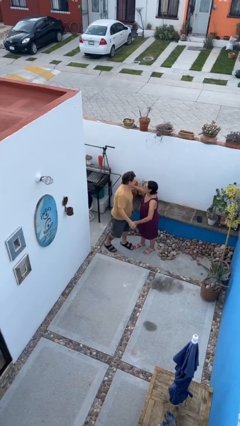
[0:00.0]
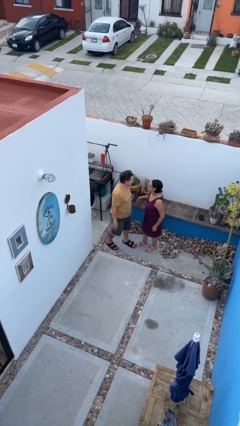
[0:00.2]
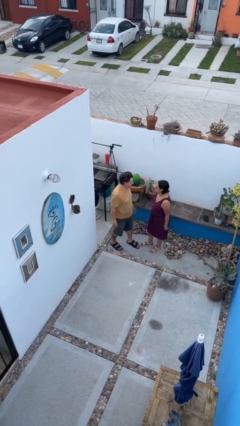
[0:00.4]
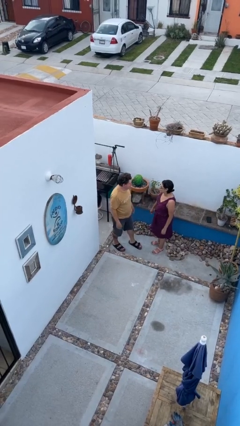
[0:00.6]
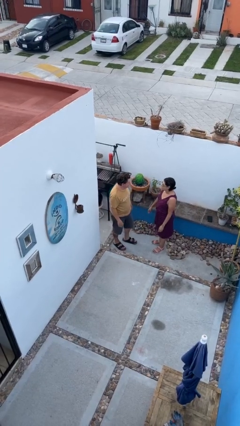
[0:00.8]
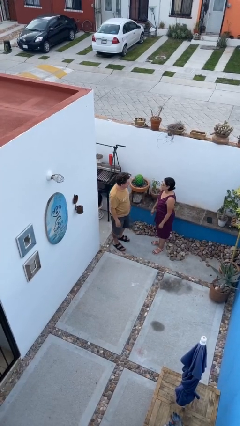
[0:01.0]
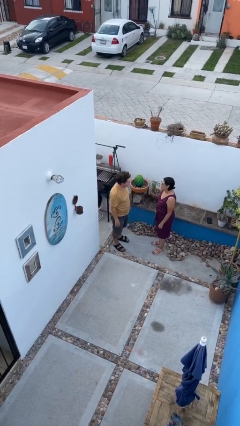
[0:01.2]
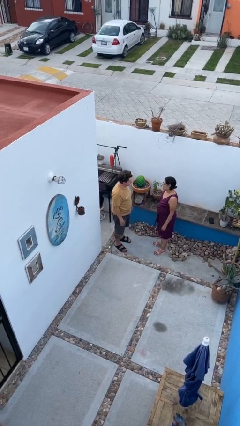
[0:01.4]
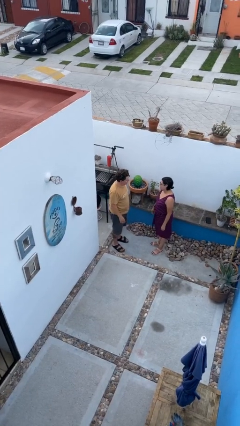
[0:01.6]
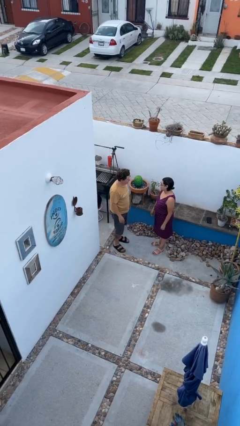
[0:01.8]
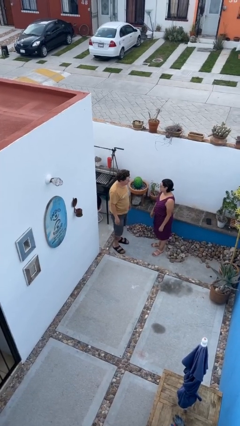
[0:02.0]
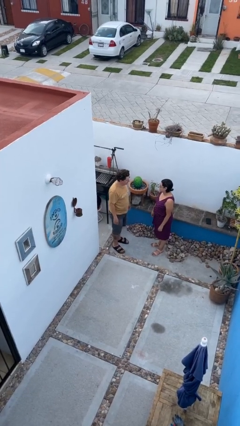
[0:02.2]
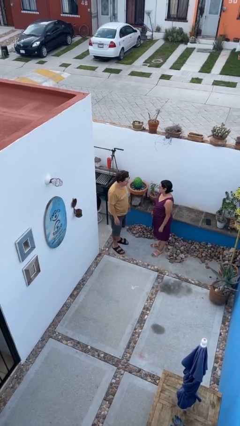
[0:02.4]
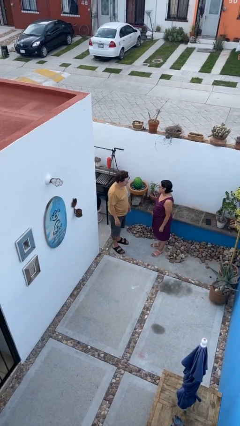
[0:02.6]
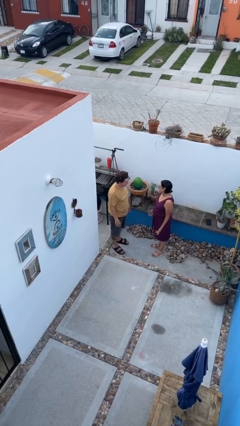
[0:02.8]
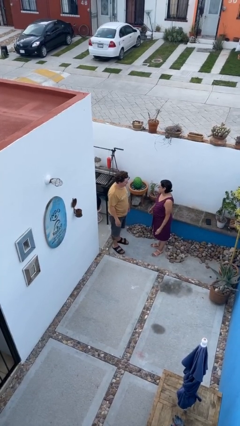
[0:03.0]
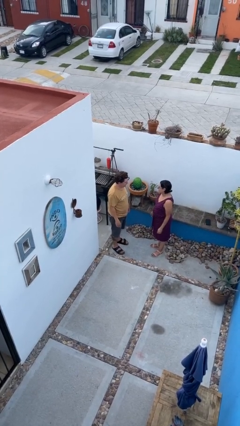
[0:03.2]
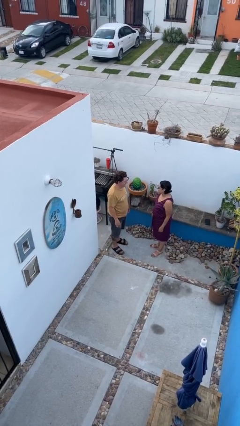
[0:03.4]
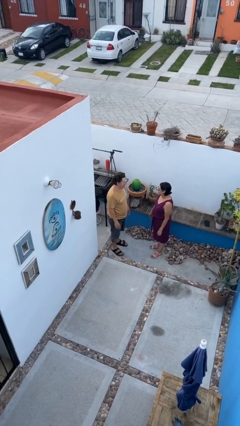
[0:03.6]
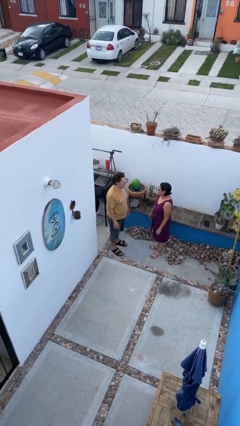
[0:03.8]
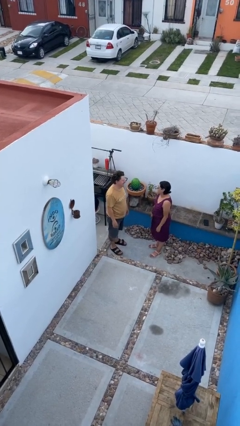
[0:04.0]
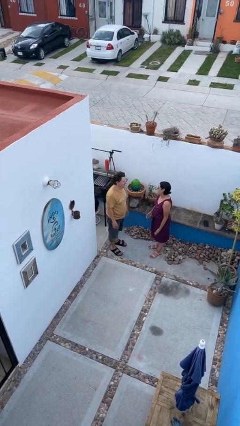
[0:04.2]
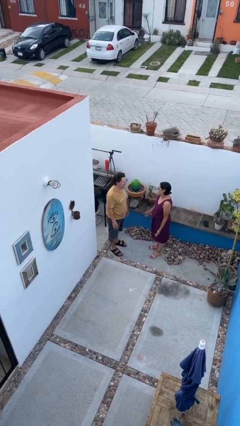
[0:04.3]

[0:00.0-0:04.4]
person talks to person

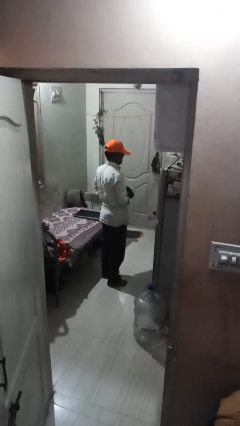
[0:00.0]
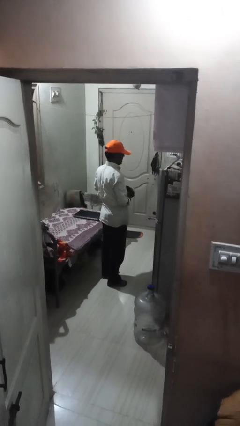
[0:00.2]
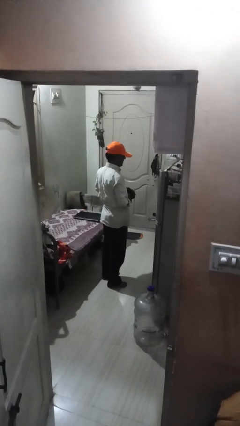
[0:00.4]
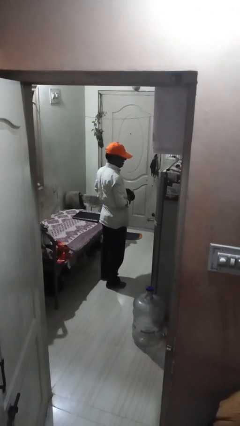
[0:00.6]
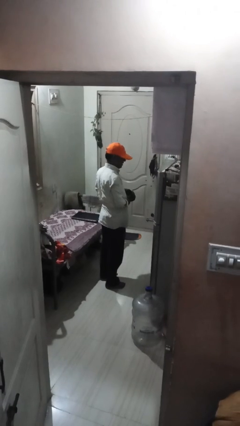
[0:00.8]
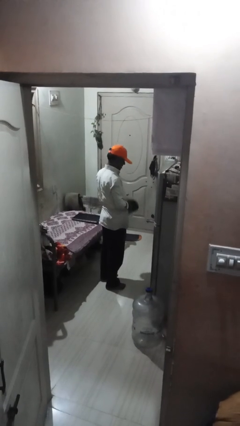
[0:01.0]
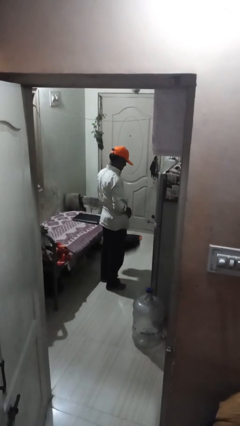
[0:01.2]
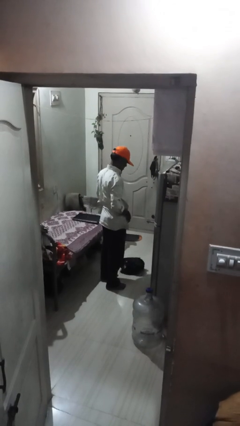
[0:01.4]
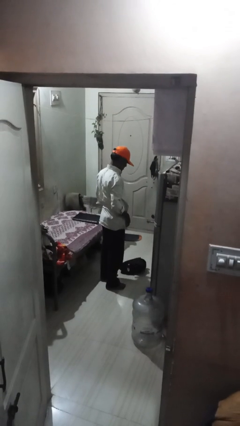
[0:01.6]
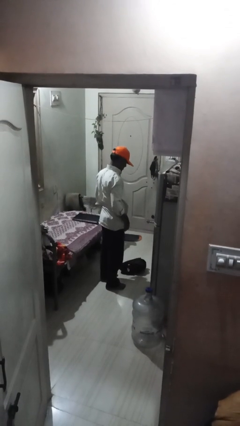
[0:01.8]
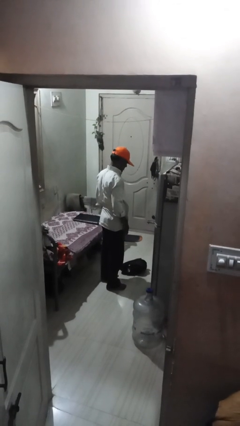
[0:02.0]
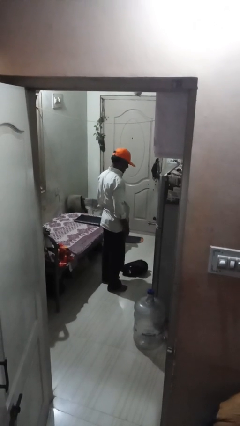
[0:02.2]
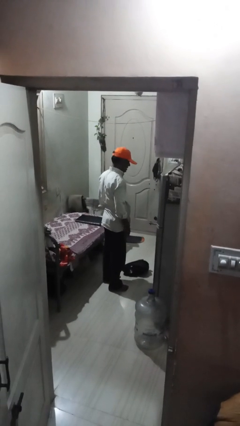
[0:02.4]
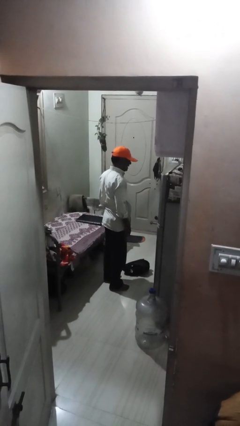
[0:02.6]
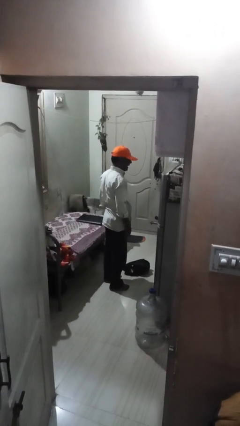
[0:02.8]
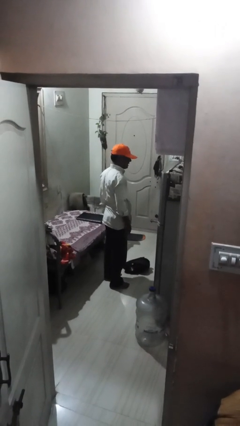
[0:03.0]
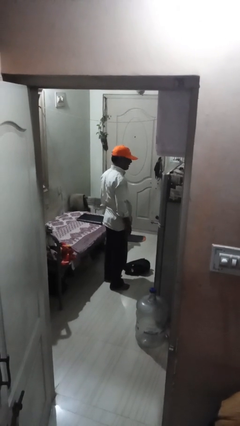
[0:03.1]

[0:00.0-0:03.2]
person drops object

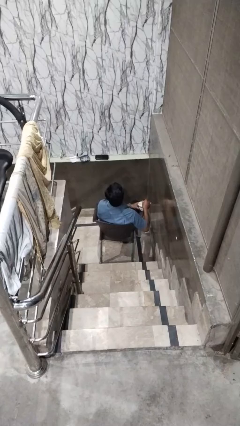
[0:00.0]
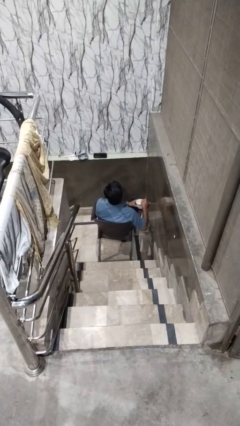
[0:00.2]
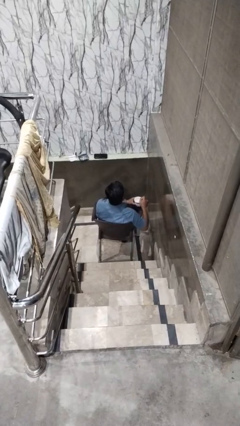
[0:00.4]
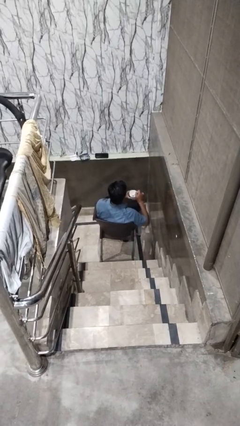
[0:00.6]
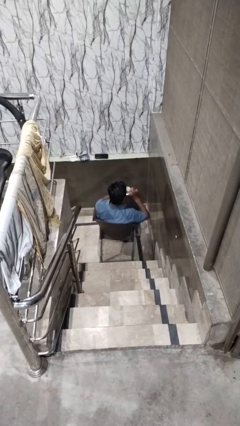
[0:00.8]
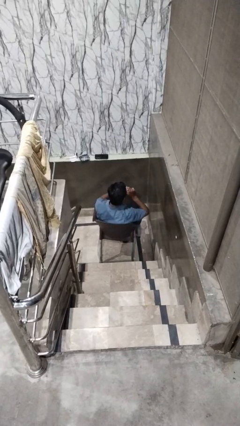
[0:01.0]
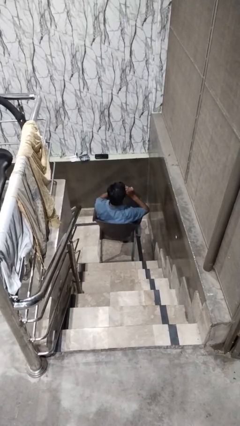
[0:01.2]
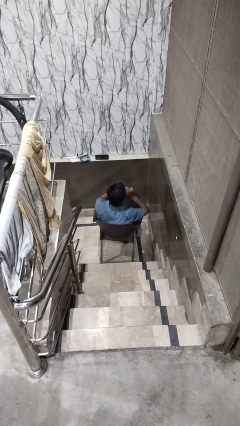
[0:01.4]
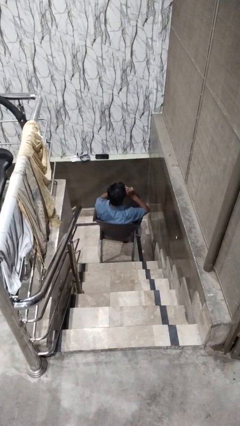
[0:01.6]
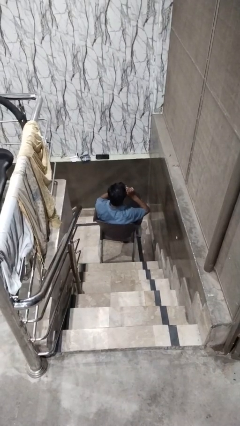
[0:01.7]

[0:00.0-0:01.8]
person drinks from mug

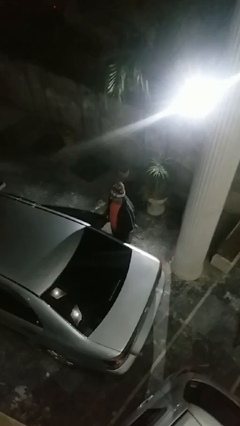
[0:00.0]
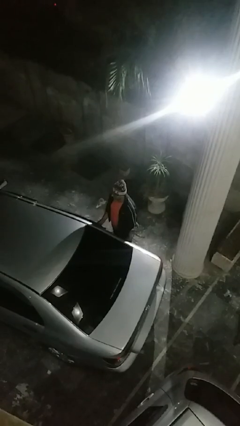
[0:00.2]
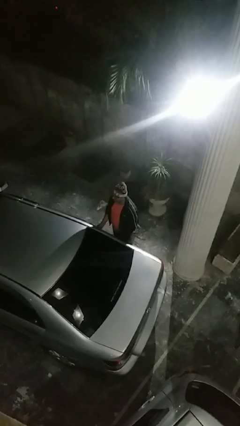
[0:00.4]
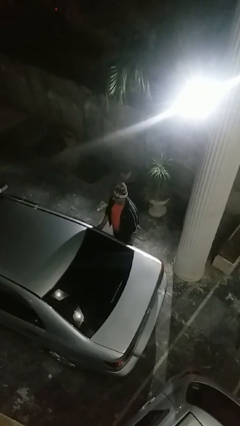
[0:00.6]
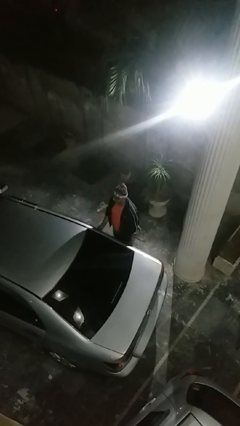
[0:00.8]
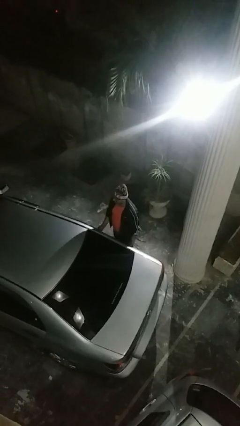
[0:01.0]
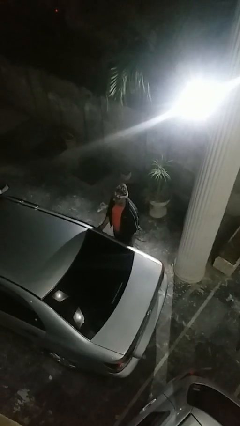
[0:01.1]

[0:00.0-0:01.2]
person closes car door

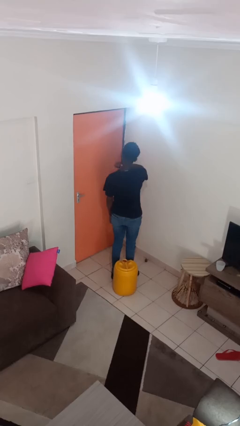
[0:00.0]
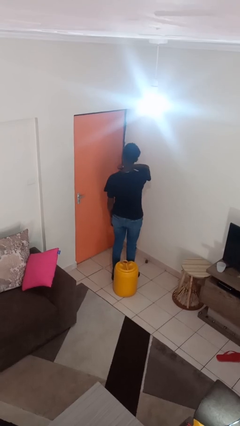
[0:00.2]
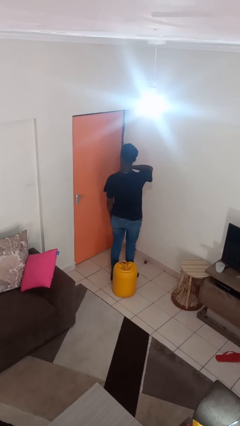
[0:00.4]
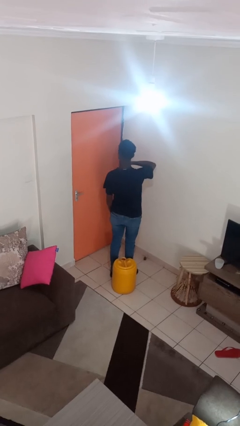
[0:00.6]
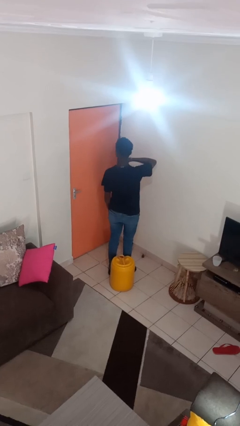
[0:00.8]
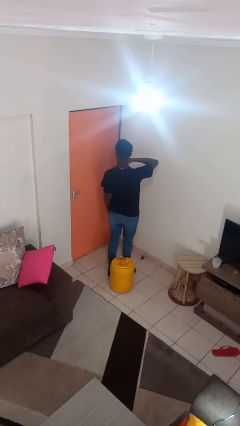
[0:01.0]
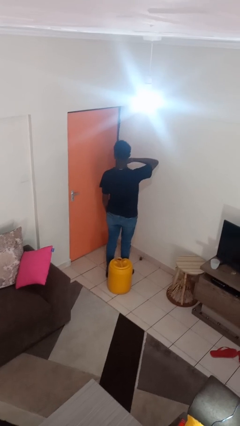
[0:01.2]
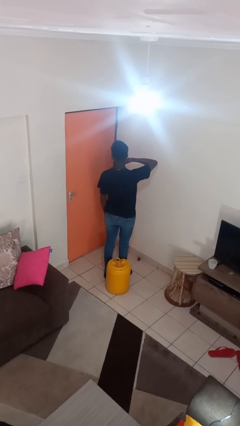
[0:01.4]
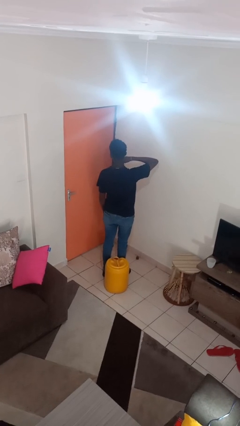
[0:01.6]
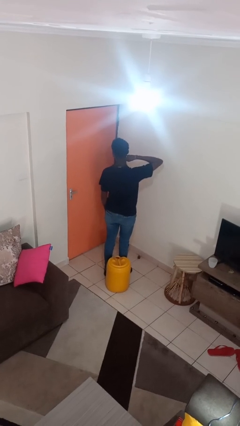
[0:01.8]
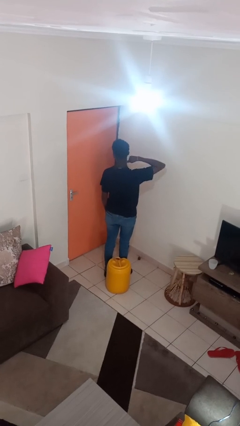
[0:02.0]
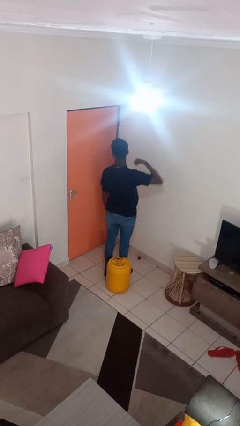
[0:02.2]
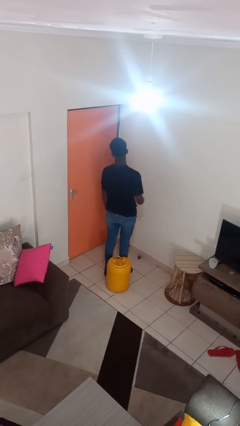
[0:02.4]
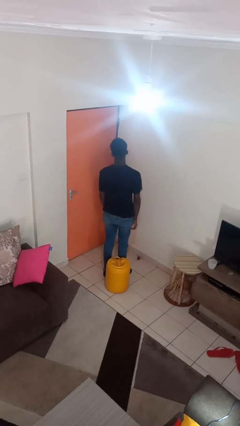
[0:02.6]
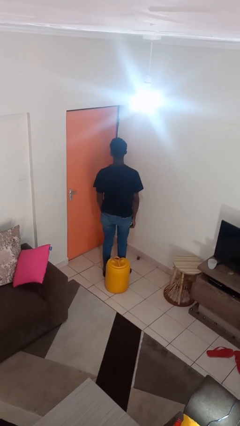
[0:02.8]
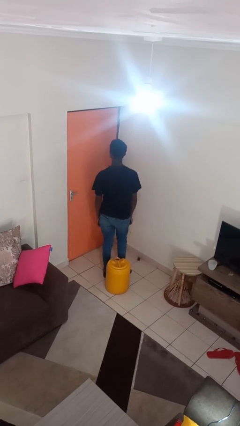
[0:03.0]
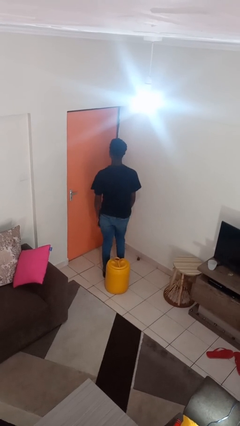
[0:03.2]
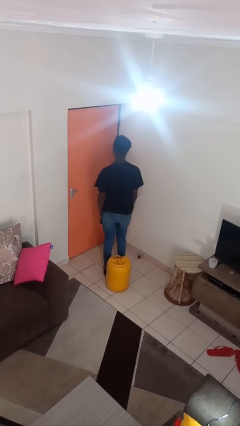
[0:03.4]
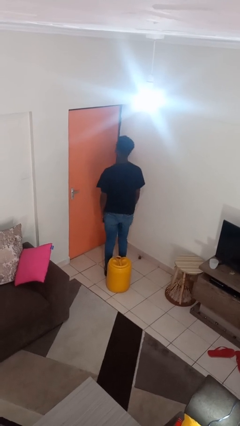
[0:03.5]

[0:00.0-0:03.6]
person gestures cut

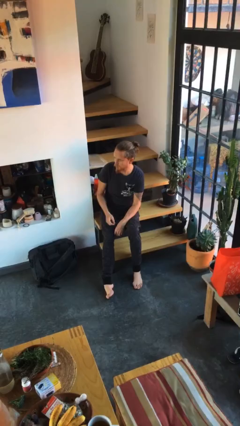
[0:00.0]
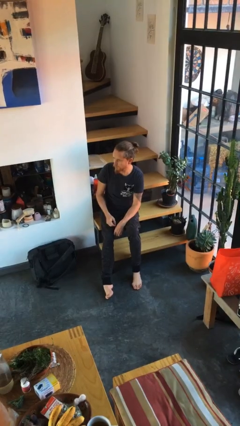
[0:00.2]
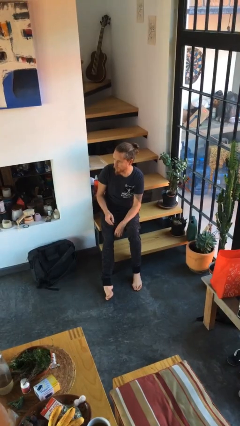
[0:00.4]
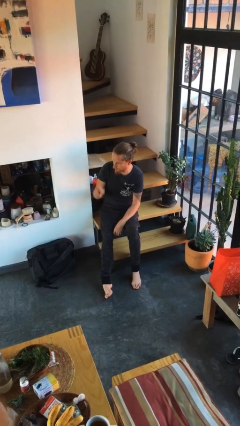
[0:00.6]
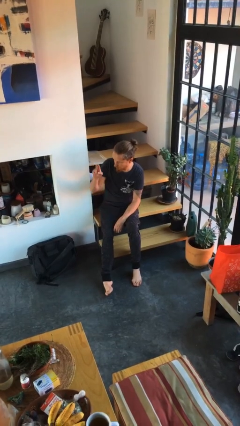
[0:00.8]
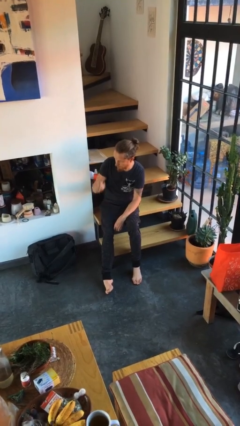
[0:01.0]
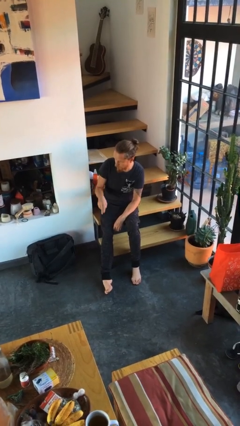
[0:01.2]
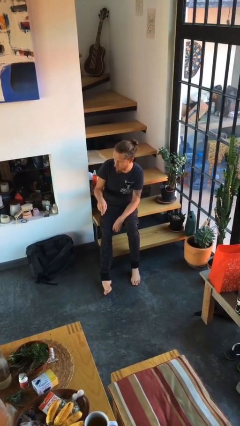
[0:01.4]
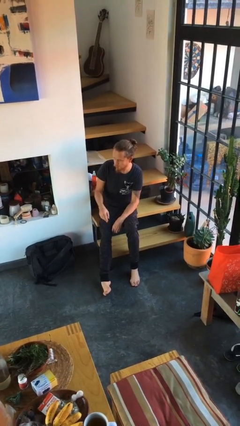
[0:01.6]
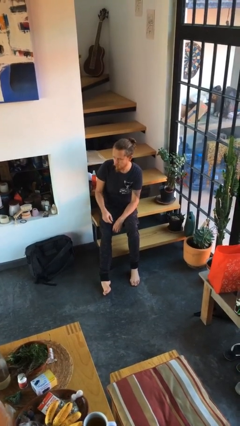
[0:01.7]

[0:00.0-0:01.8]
person gestures swipe down

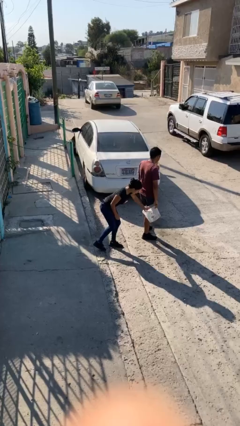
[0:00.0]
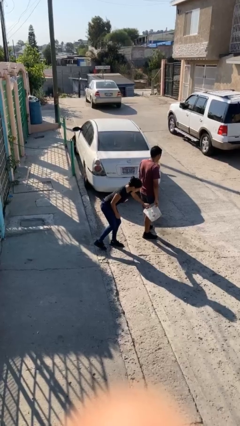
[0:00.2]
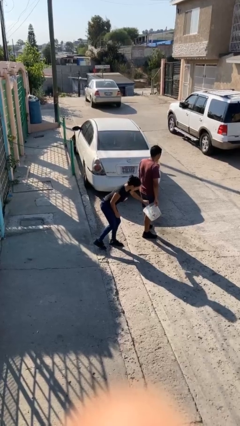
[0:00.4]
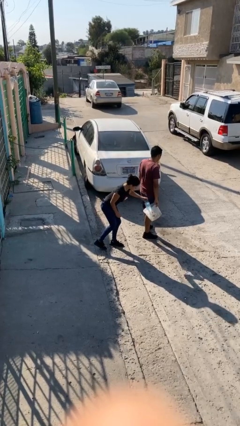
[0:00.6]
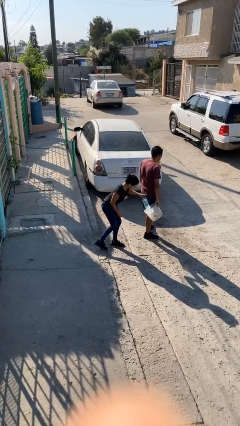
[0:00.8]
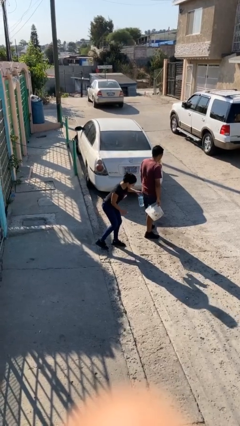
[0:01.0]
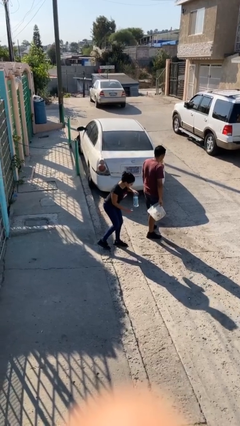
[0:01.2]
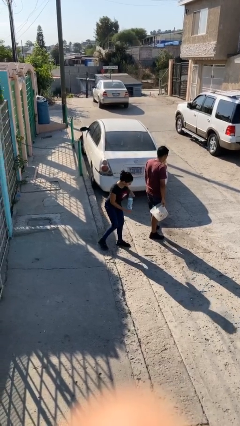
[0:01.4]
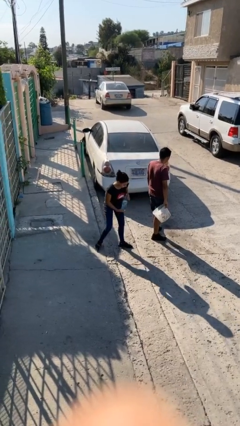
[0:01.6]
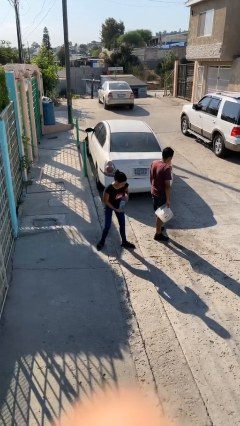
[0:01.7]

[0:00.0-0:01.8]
person steals object from person
